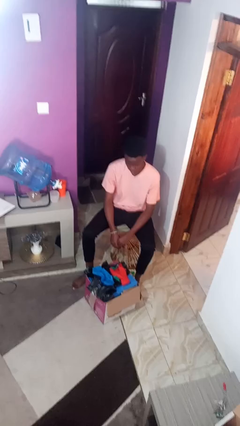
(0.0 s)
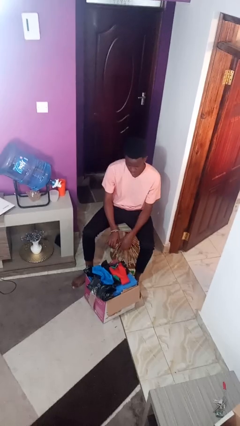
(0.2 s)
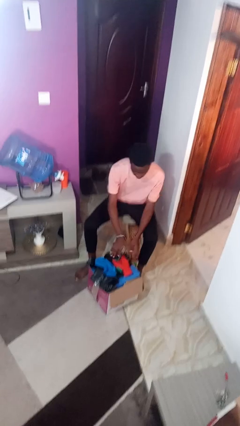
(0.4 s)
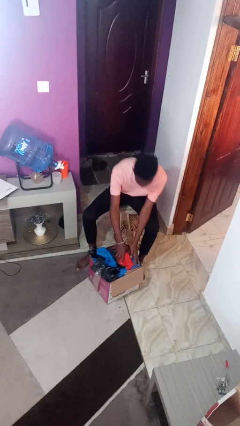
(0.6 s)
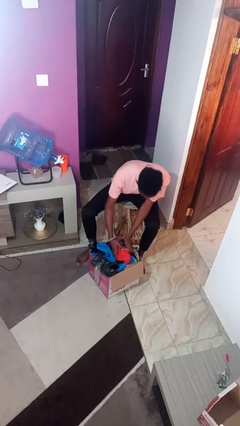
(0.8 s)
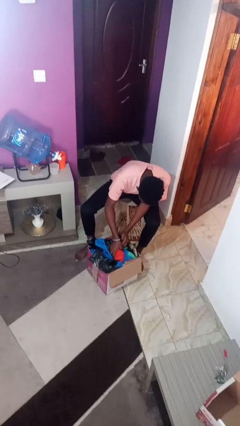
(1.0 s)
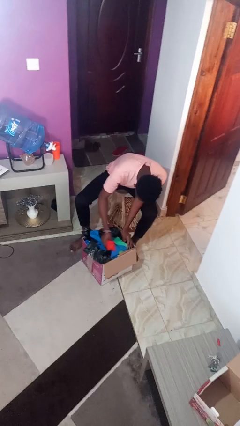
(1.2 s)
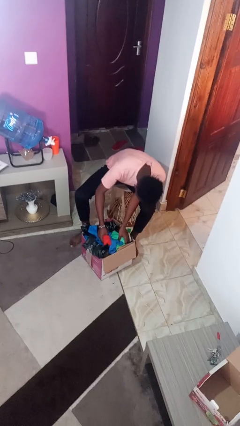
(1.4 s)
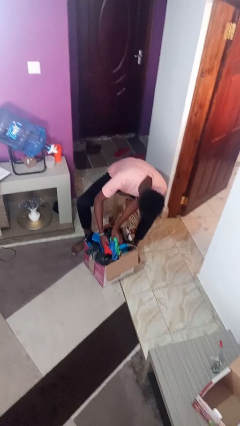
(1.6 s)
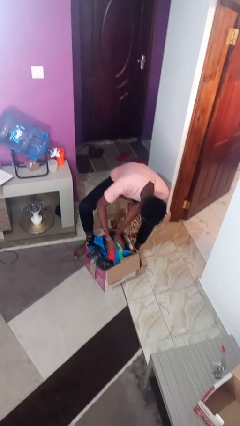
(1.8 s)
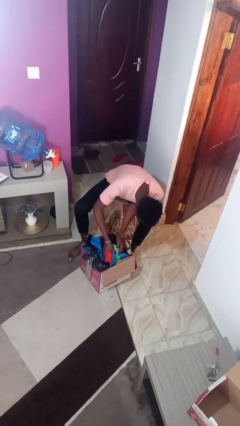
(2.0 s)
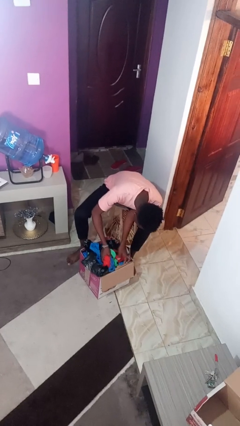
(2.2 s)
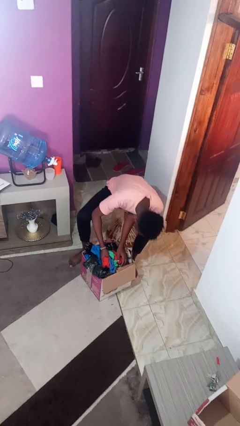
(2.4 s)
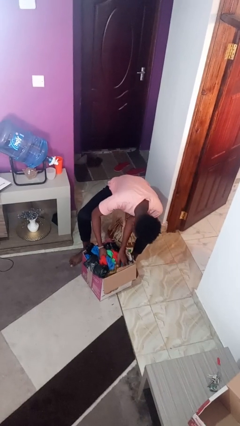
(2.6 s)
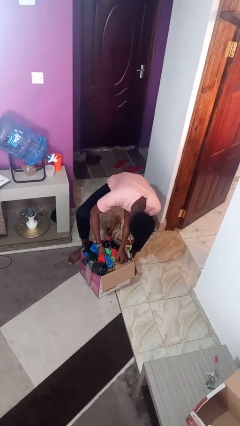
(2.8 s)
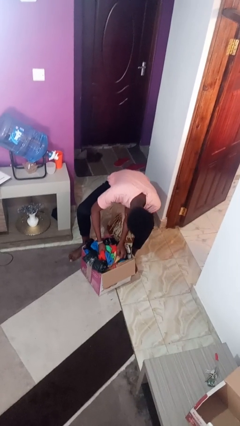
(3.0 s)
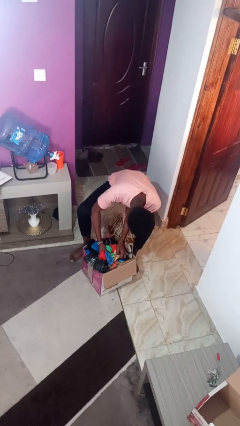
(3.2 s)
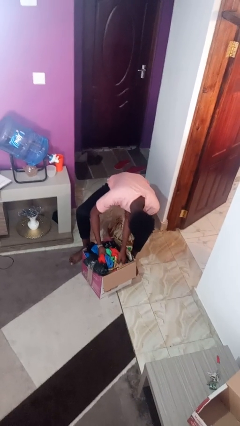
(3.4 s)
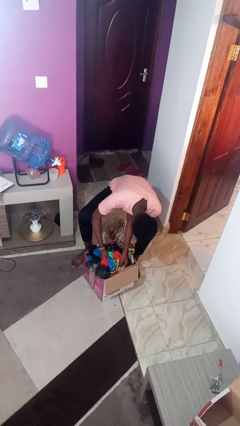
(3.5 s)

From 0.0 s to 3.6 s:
person searches in box

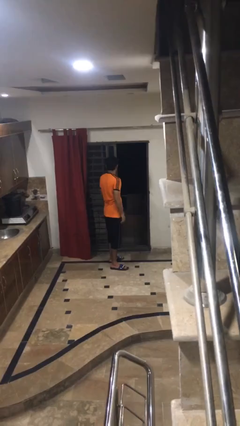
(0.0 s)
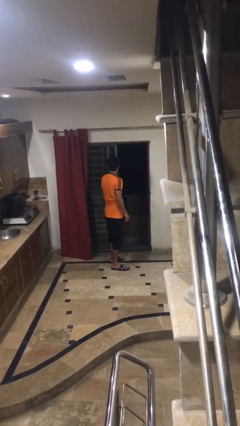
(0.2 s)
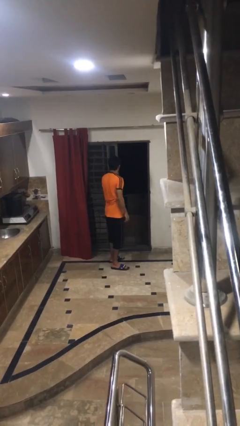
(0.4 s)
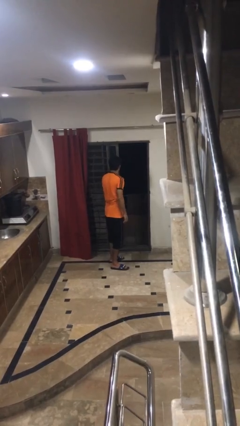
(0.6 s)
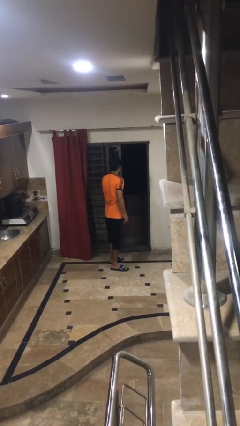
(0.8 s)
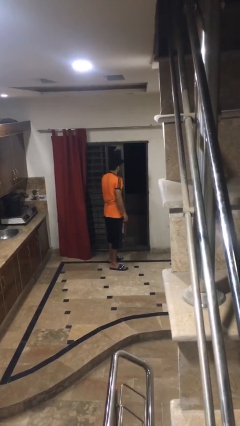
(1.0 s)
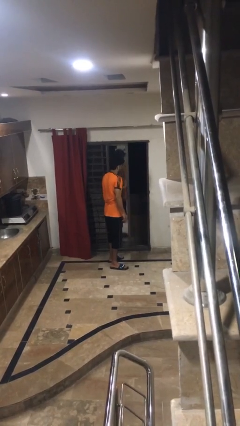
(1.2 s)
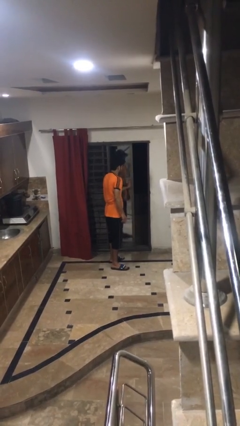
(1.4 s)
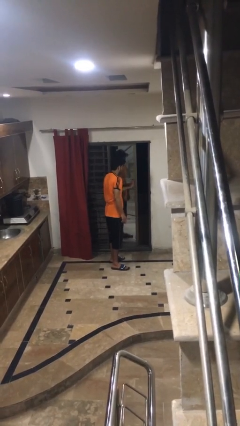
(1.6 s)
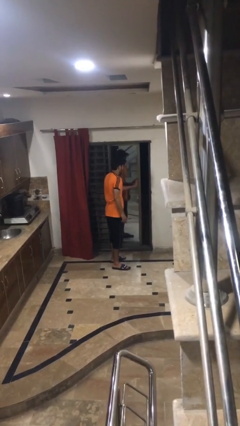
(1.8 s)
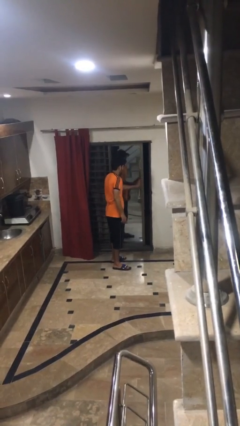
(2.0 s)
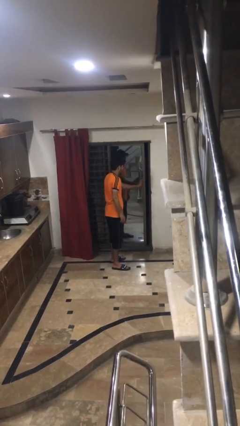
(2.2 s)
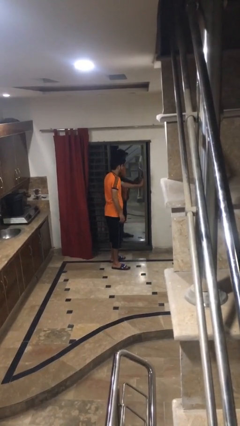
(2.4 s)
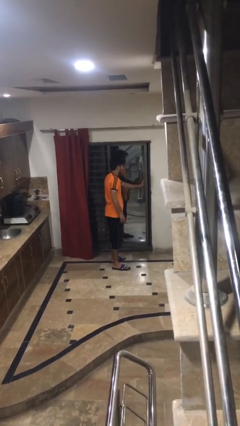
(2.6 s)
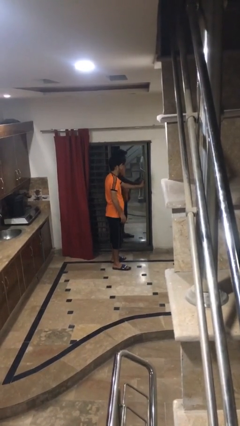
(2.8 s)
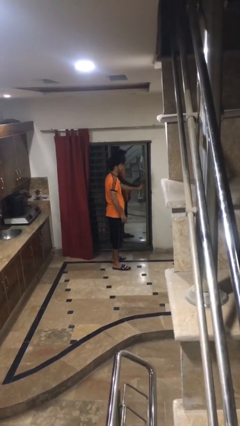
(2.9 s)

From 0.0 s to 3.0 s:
person closes sliding door

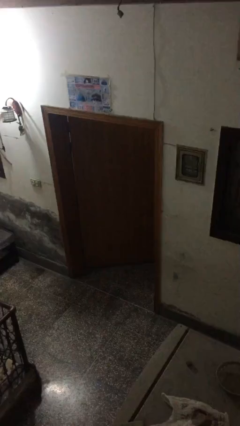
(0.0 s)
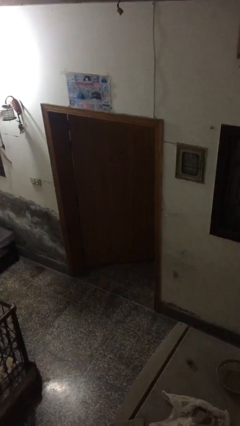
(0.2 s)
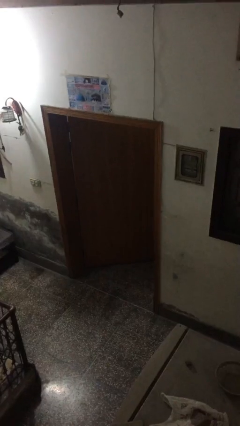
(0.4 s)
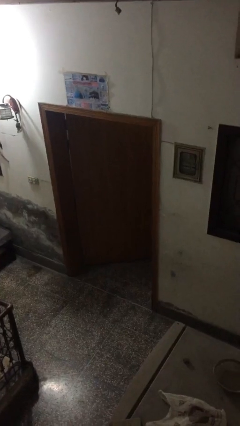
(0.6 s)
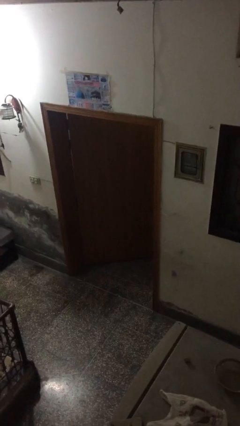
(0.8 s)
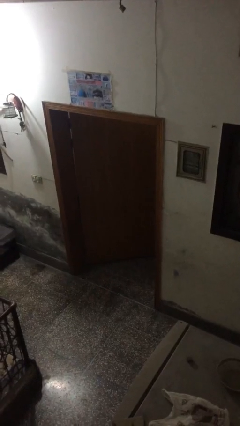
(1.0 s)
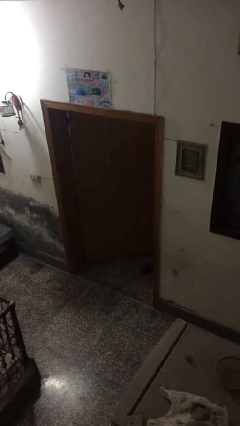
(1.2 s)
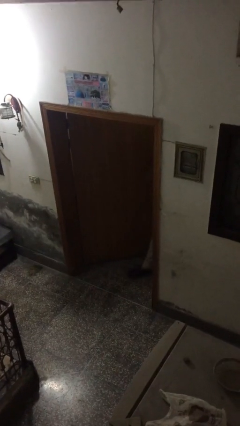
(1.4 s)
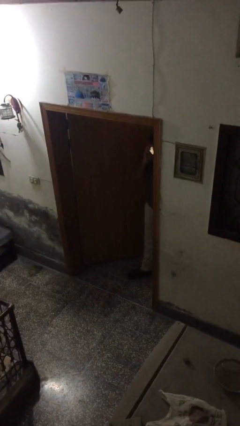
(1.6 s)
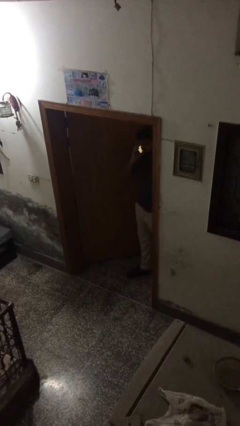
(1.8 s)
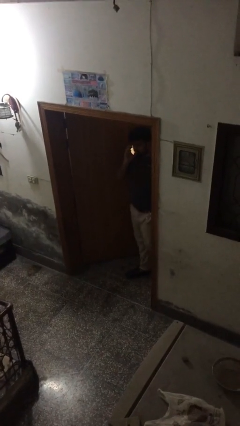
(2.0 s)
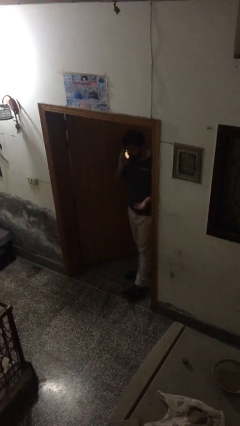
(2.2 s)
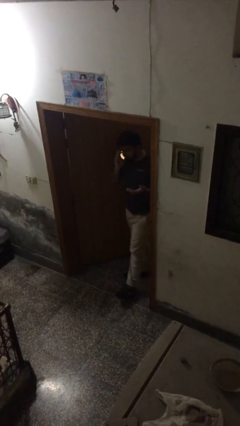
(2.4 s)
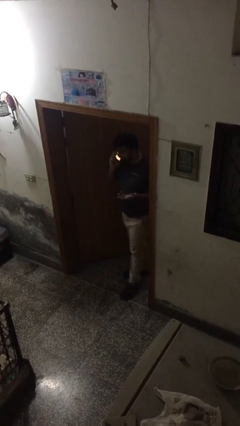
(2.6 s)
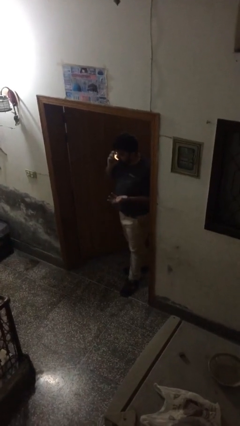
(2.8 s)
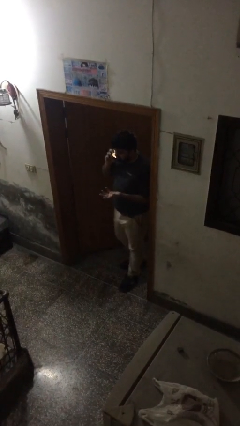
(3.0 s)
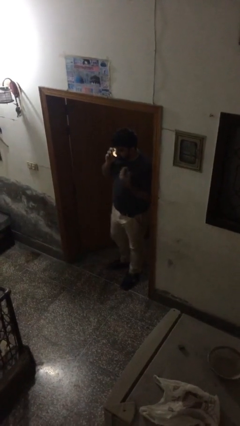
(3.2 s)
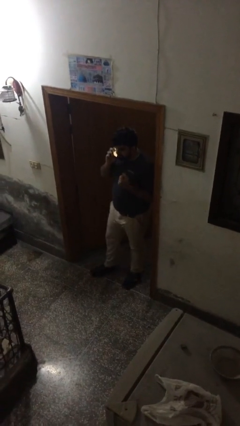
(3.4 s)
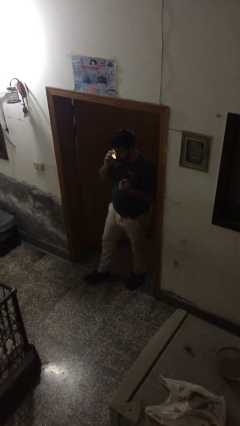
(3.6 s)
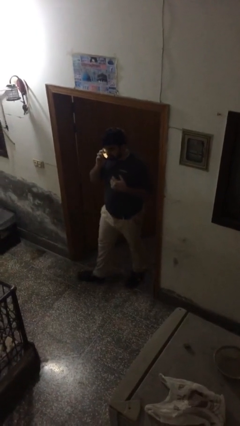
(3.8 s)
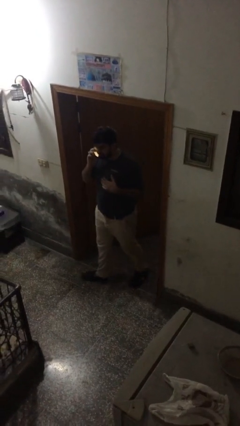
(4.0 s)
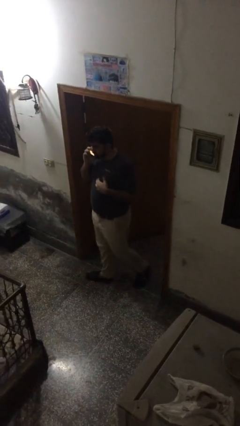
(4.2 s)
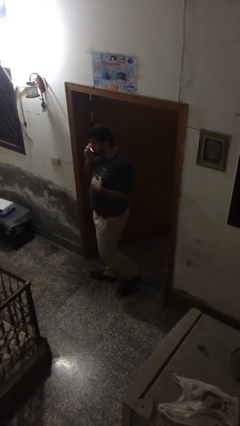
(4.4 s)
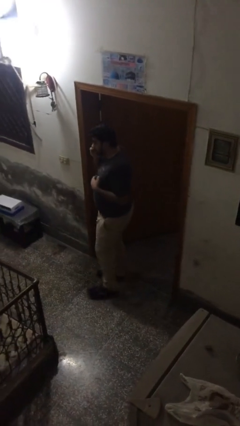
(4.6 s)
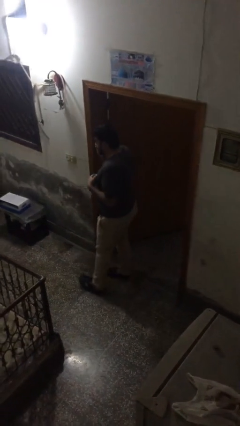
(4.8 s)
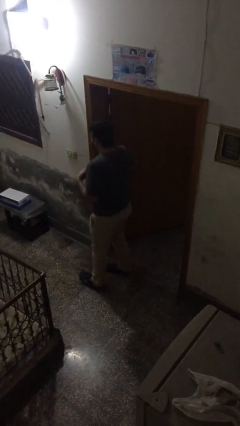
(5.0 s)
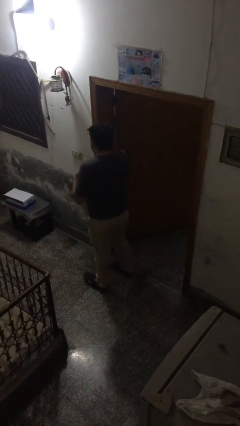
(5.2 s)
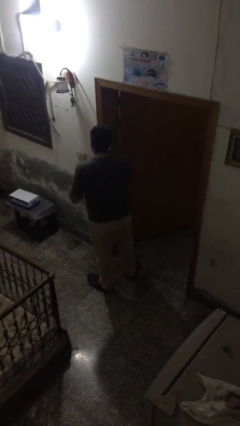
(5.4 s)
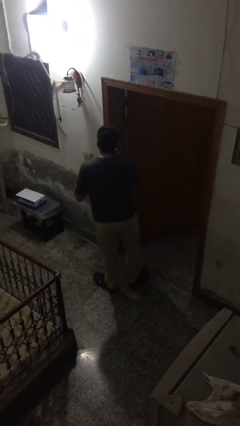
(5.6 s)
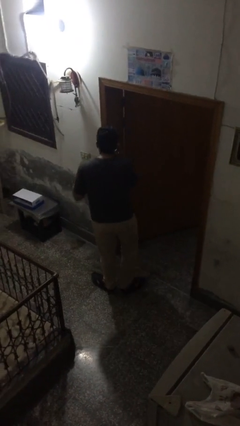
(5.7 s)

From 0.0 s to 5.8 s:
person enters scene through structure

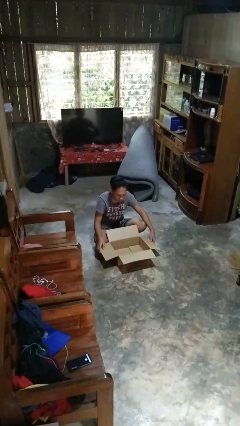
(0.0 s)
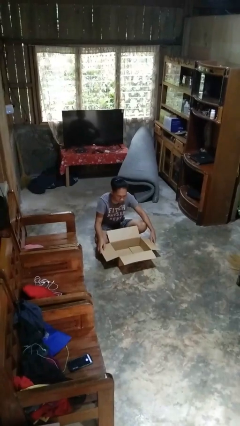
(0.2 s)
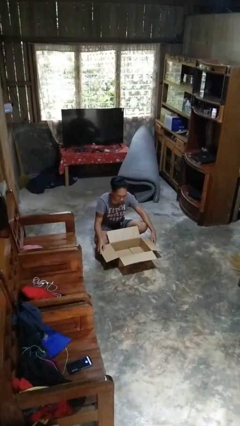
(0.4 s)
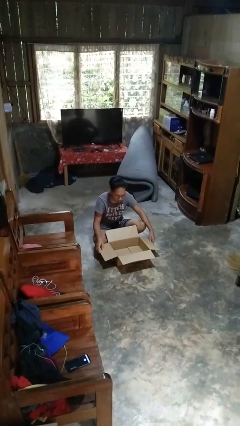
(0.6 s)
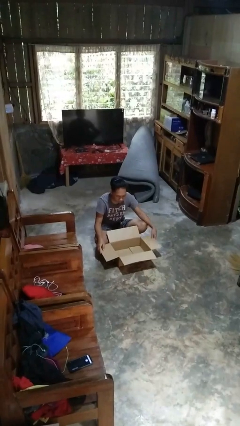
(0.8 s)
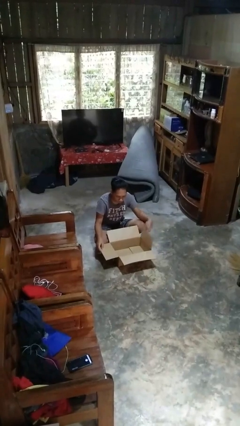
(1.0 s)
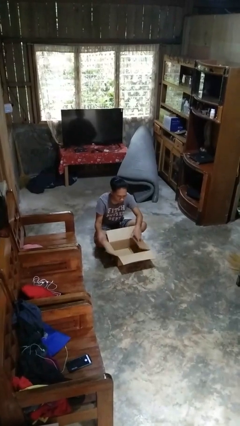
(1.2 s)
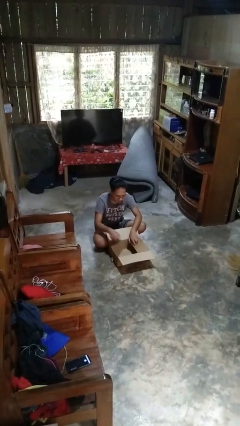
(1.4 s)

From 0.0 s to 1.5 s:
person closes box

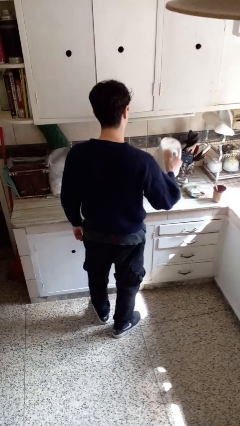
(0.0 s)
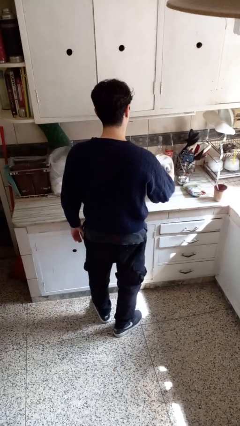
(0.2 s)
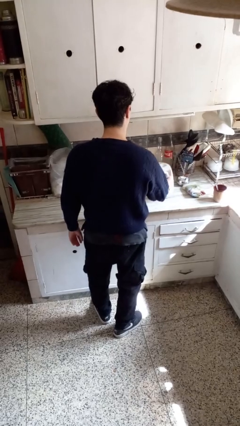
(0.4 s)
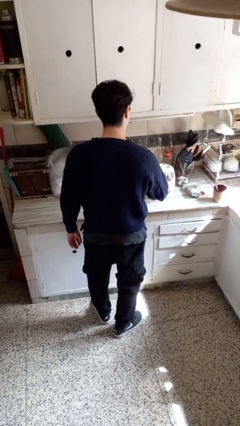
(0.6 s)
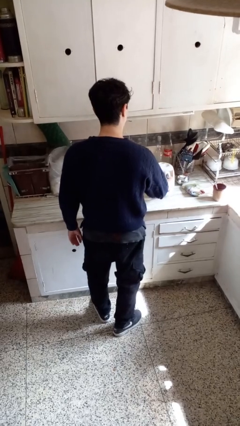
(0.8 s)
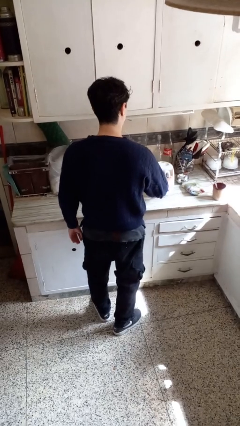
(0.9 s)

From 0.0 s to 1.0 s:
person puts down object on countertop

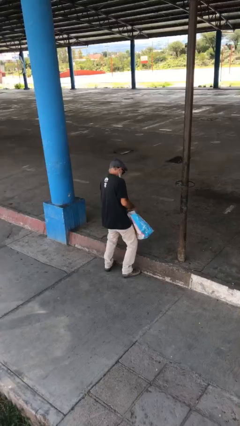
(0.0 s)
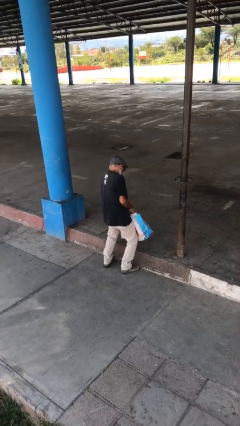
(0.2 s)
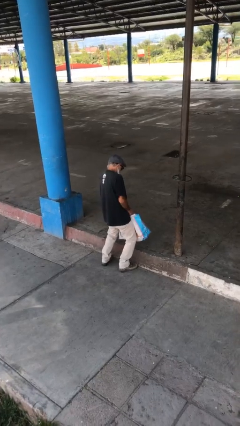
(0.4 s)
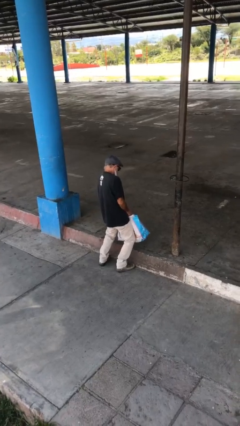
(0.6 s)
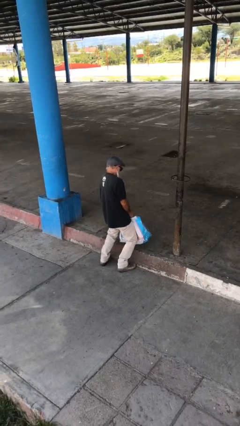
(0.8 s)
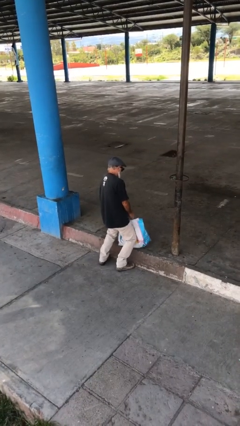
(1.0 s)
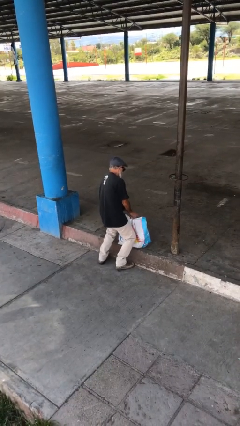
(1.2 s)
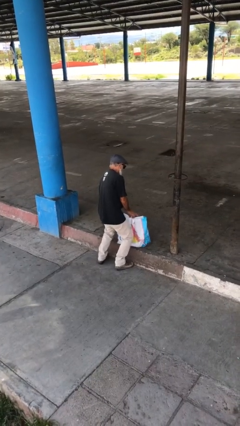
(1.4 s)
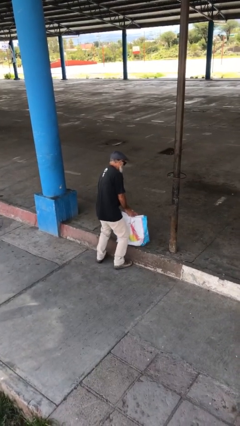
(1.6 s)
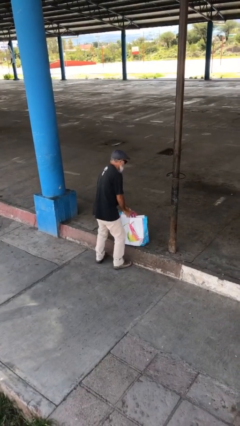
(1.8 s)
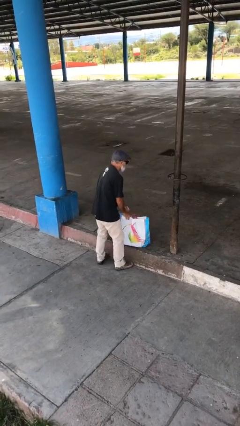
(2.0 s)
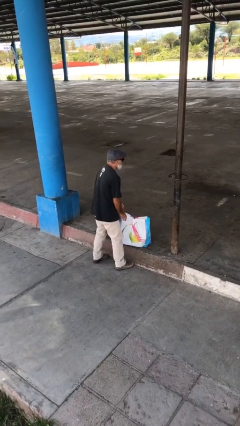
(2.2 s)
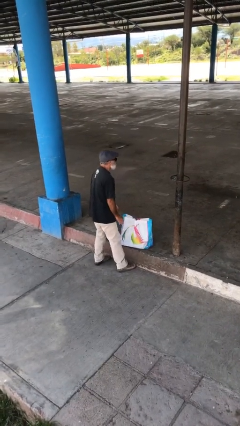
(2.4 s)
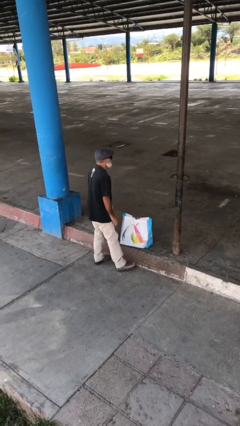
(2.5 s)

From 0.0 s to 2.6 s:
person puts down object on floor
